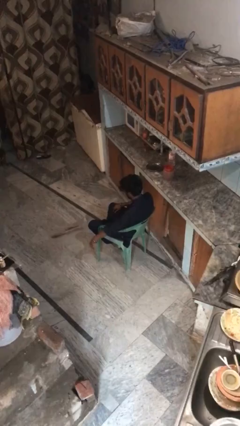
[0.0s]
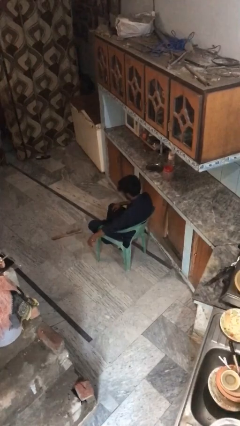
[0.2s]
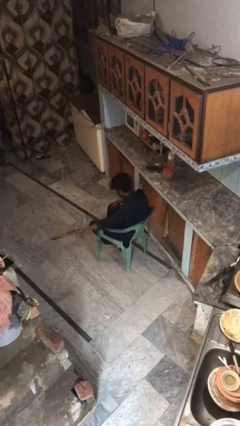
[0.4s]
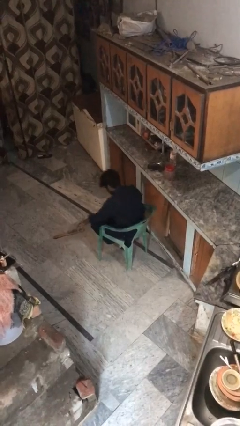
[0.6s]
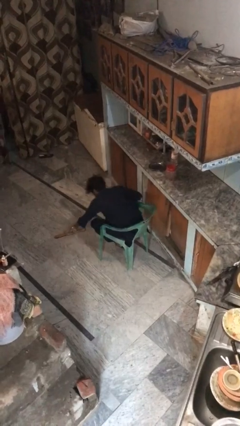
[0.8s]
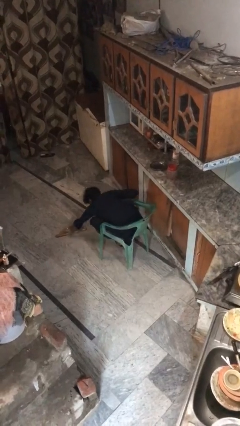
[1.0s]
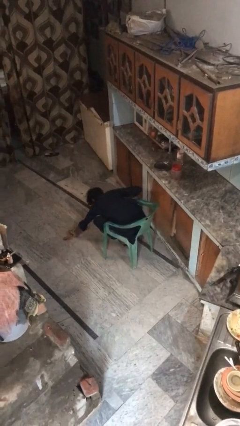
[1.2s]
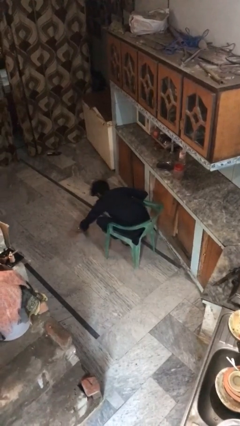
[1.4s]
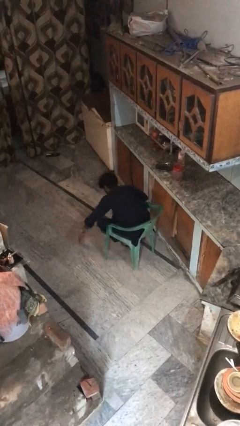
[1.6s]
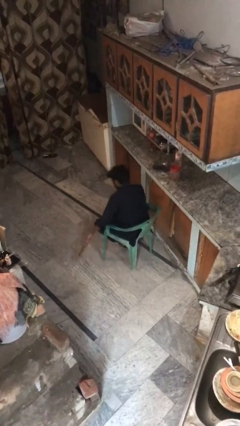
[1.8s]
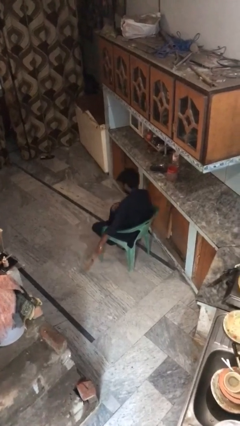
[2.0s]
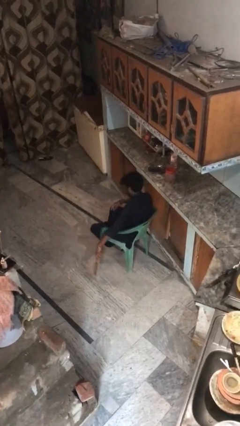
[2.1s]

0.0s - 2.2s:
person picks up object from floor

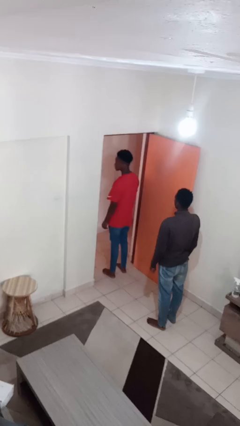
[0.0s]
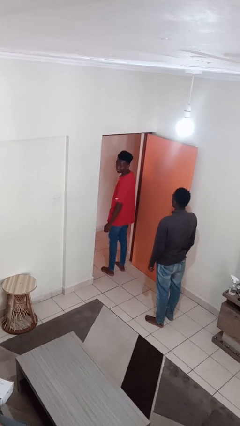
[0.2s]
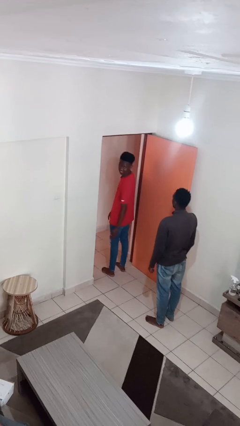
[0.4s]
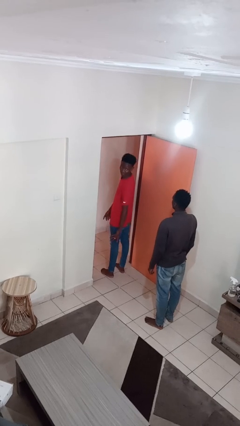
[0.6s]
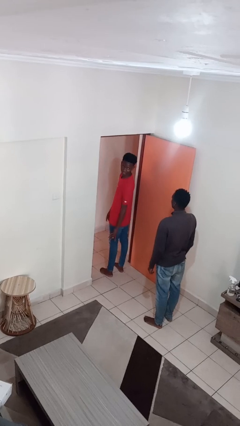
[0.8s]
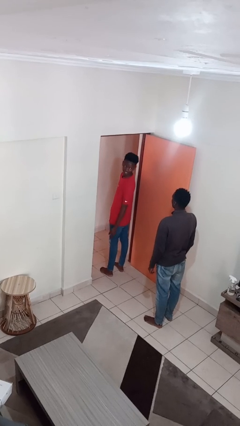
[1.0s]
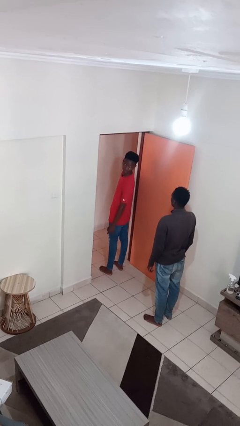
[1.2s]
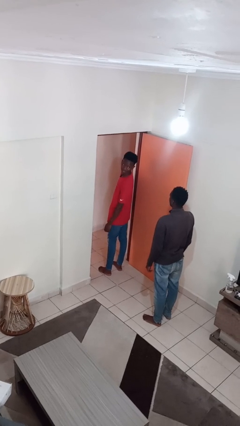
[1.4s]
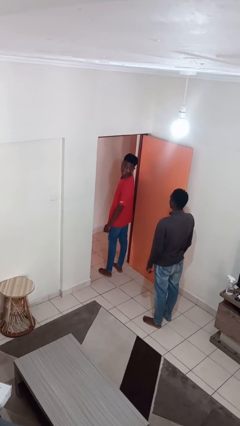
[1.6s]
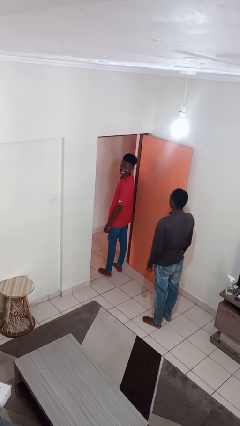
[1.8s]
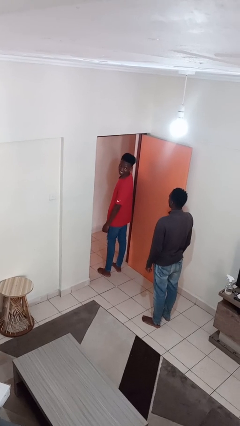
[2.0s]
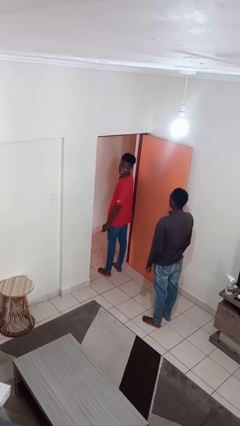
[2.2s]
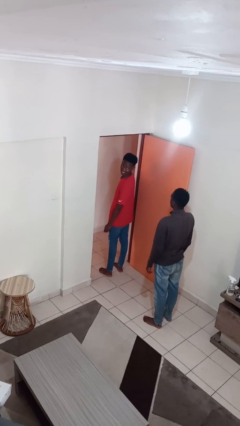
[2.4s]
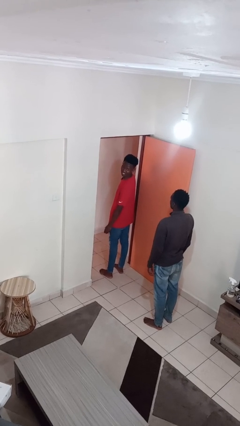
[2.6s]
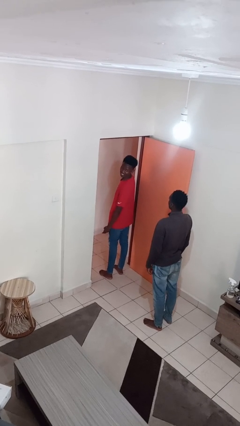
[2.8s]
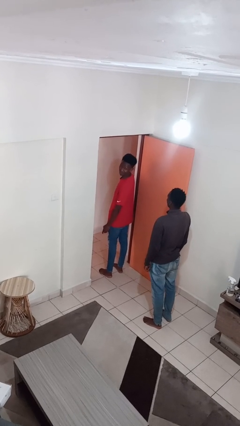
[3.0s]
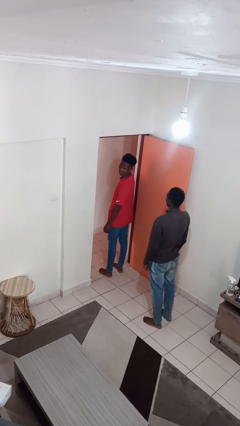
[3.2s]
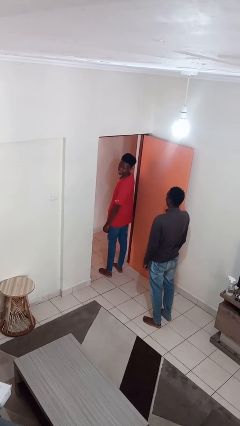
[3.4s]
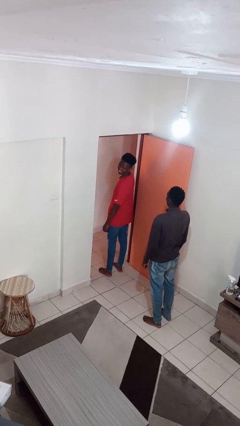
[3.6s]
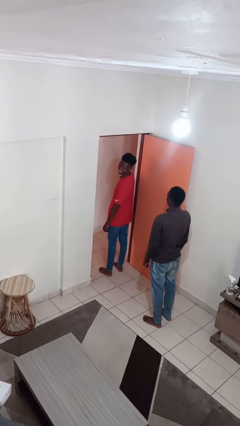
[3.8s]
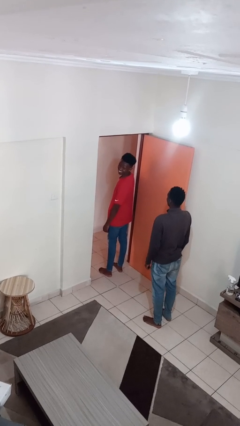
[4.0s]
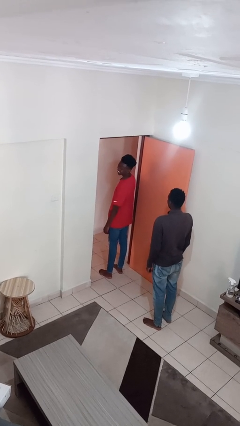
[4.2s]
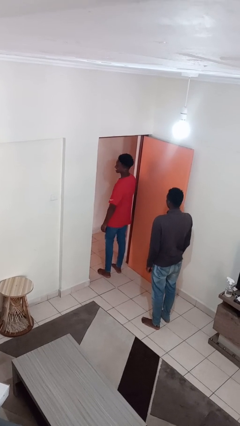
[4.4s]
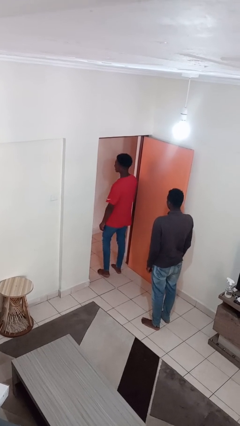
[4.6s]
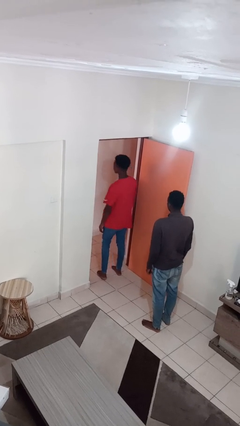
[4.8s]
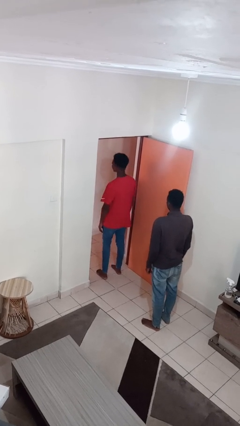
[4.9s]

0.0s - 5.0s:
person looks over shoulder

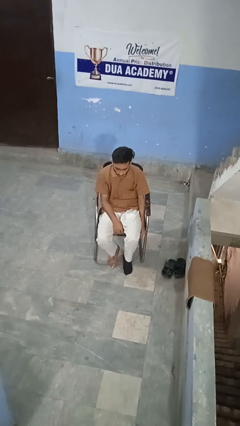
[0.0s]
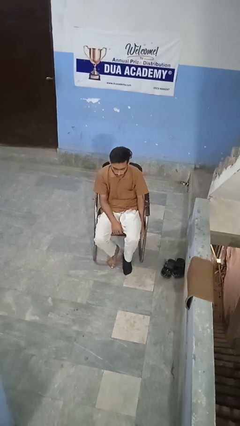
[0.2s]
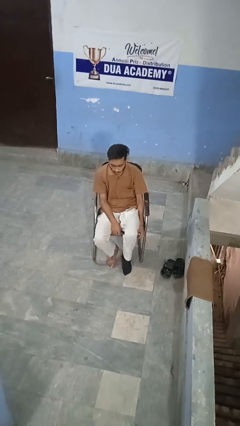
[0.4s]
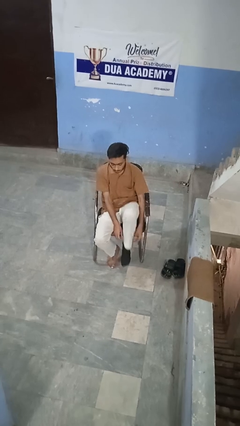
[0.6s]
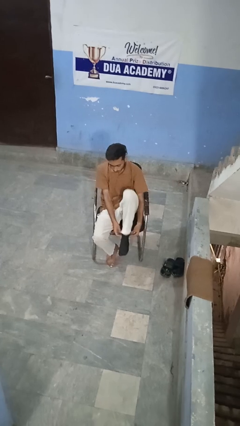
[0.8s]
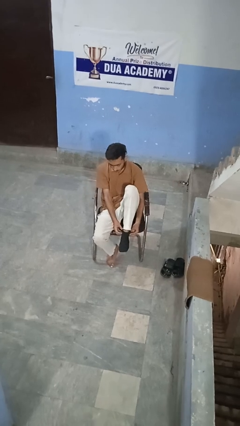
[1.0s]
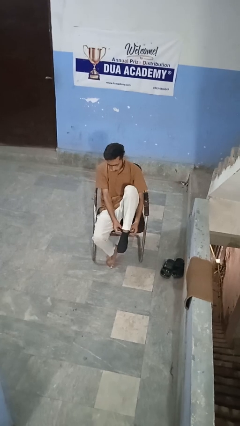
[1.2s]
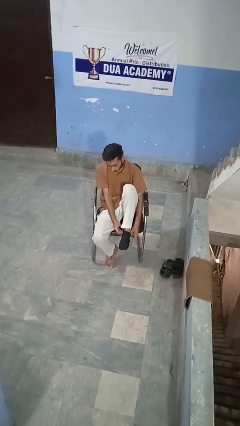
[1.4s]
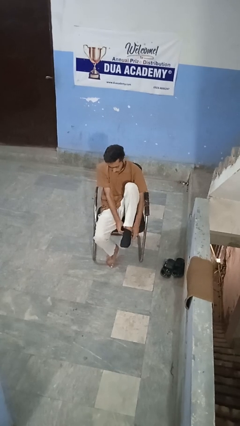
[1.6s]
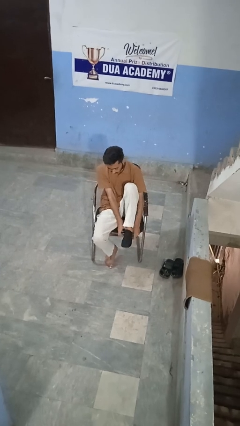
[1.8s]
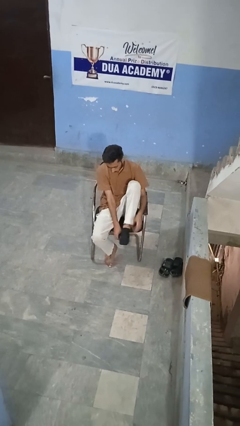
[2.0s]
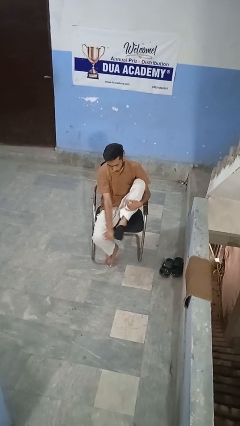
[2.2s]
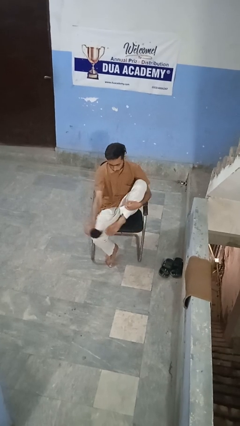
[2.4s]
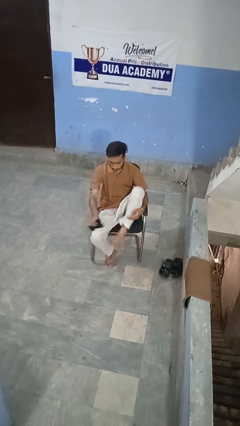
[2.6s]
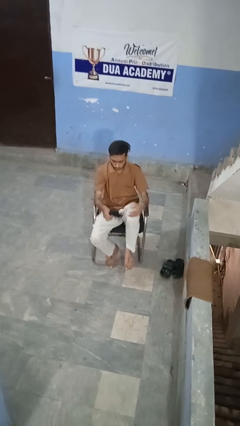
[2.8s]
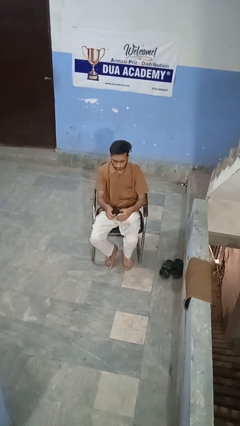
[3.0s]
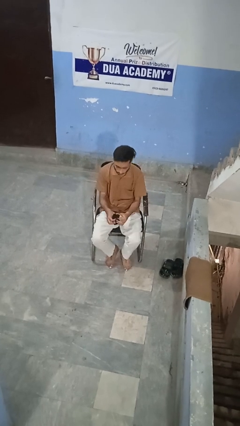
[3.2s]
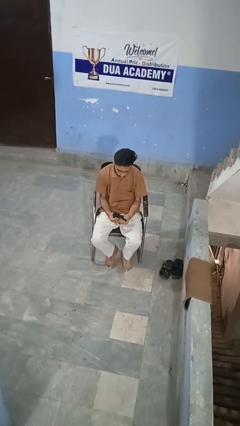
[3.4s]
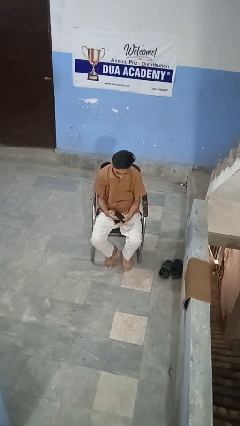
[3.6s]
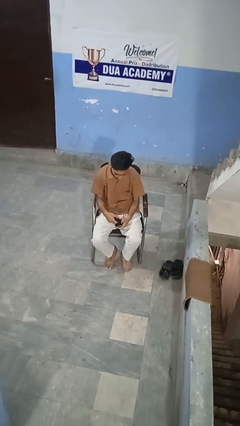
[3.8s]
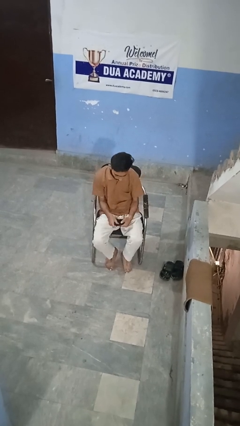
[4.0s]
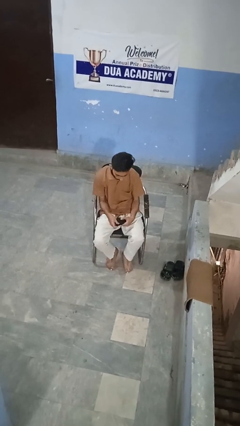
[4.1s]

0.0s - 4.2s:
person takes off socks

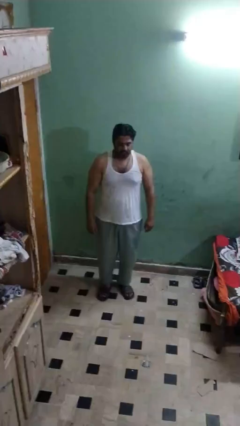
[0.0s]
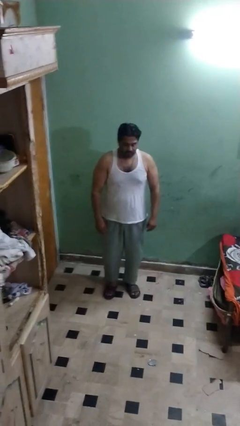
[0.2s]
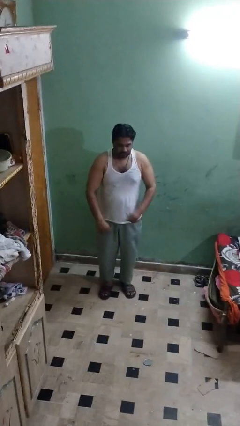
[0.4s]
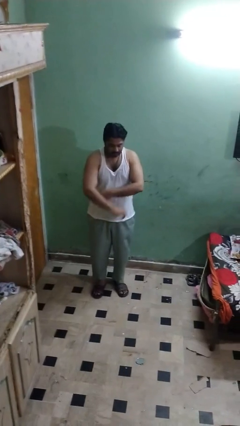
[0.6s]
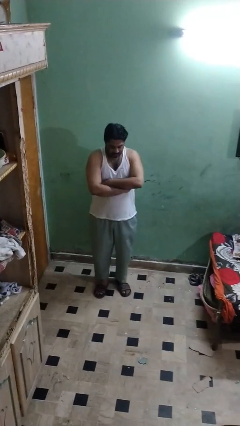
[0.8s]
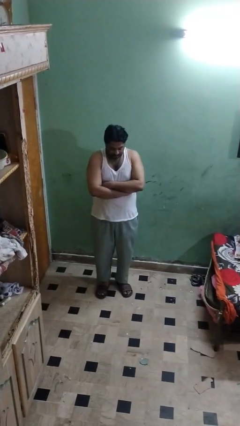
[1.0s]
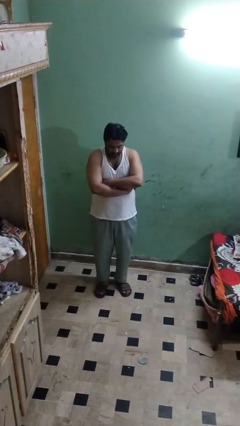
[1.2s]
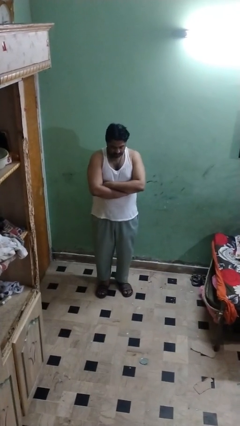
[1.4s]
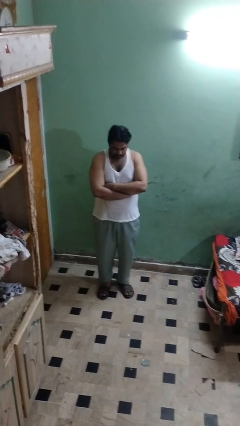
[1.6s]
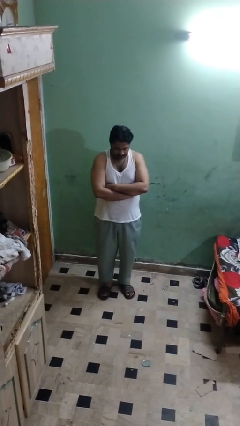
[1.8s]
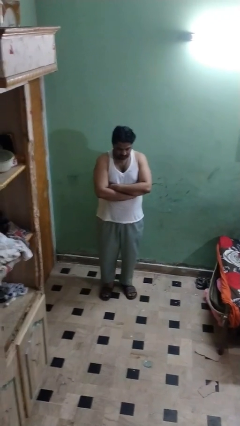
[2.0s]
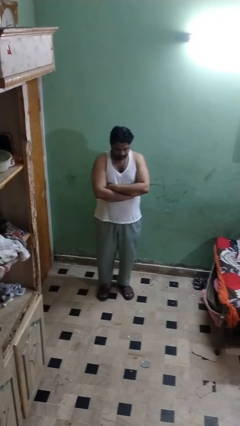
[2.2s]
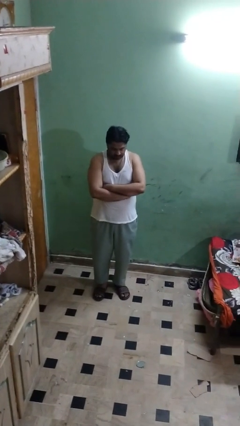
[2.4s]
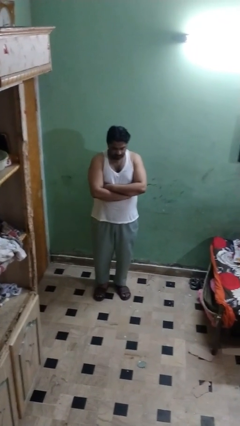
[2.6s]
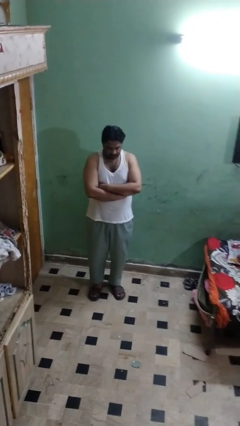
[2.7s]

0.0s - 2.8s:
person crosses arms

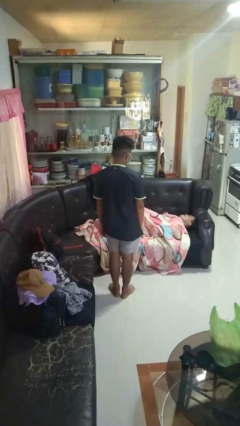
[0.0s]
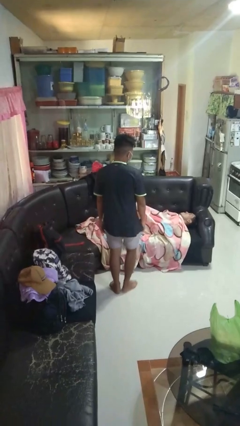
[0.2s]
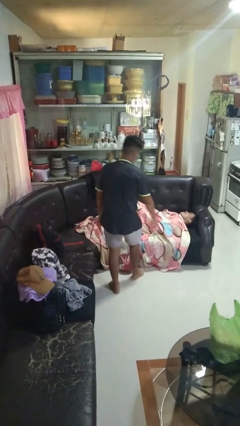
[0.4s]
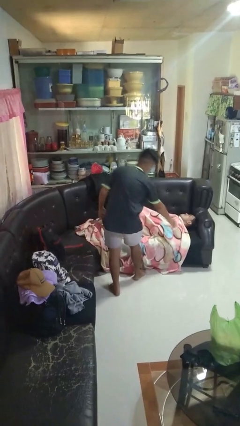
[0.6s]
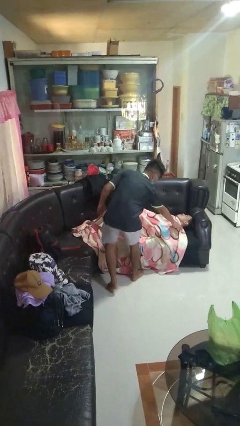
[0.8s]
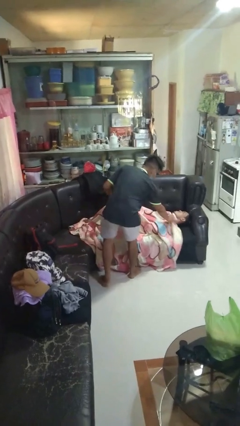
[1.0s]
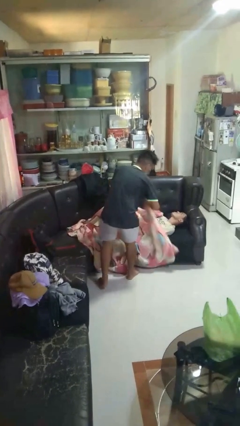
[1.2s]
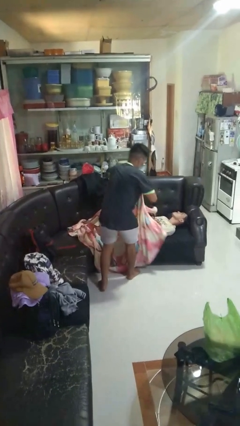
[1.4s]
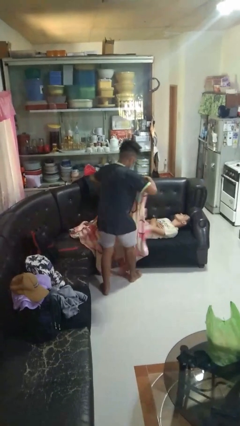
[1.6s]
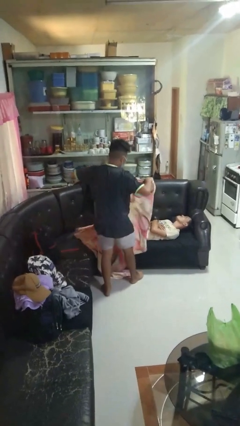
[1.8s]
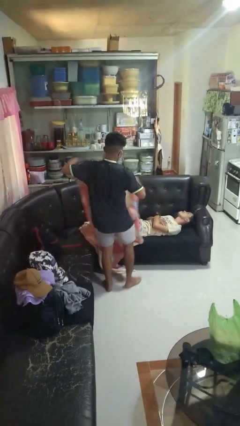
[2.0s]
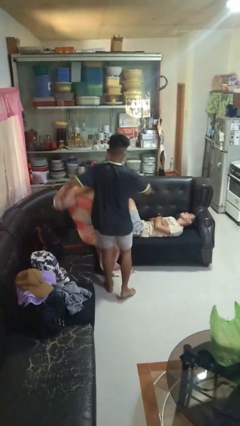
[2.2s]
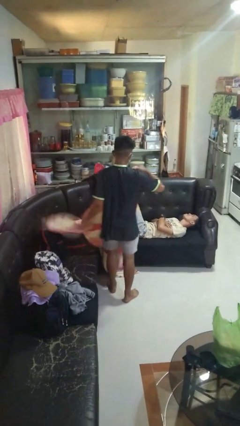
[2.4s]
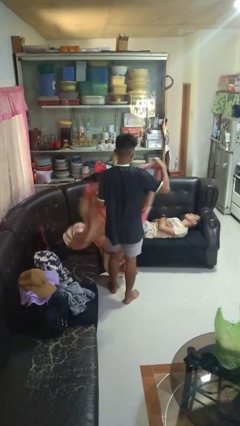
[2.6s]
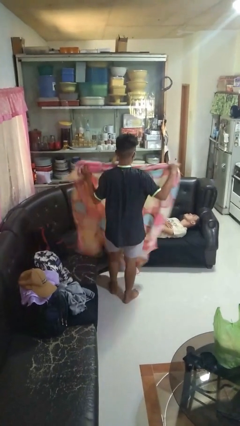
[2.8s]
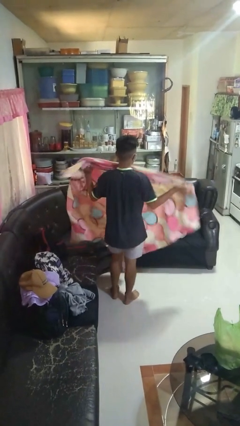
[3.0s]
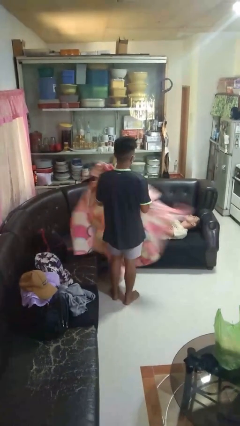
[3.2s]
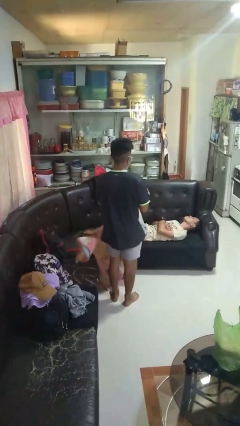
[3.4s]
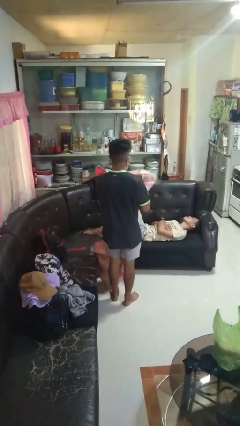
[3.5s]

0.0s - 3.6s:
person uncovers friend with blanket
